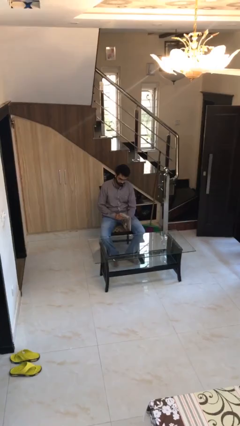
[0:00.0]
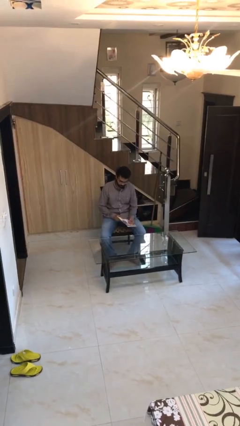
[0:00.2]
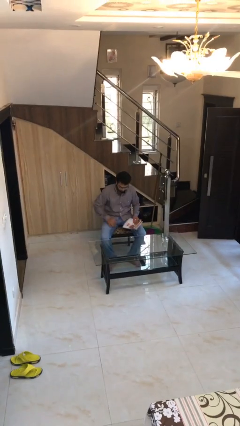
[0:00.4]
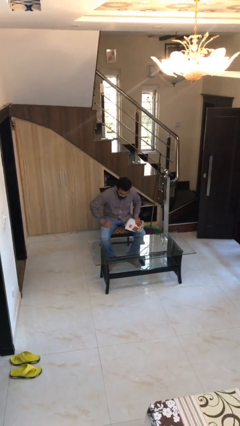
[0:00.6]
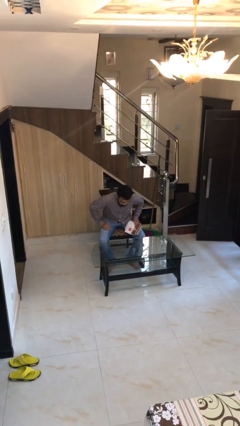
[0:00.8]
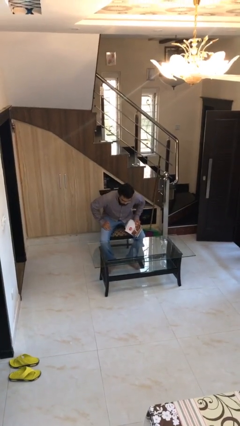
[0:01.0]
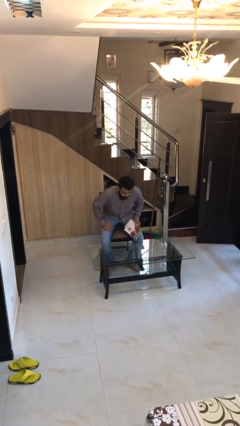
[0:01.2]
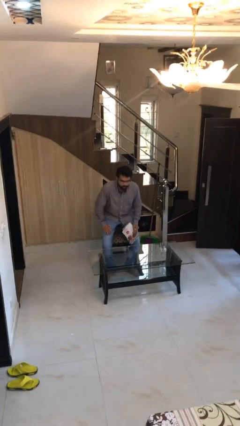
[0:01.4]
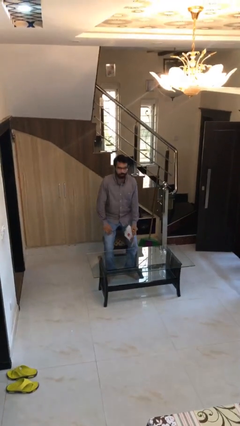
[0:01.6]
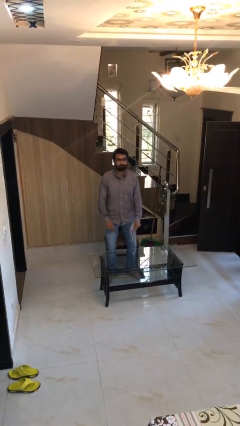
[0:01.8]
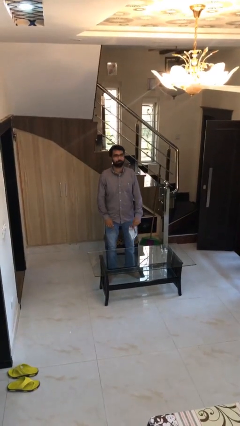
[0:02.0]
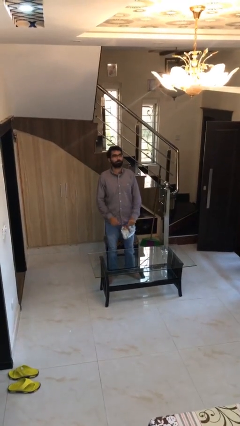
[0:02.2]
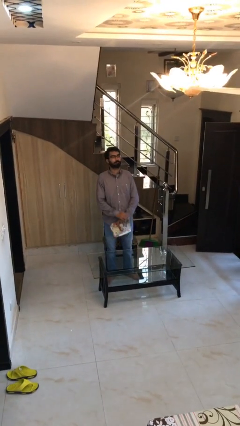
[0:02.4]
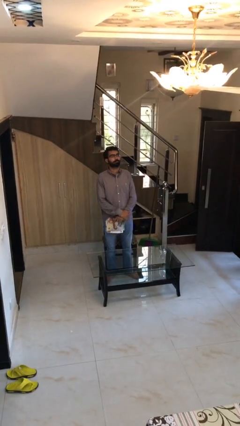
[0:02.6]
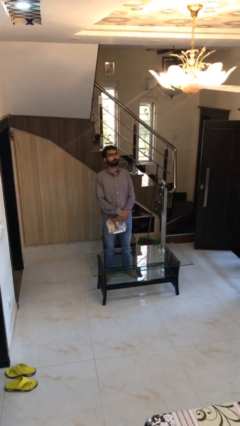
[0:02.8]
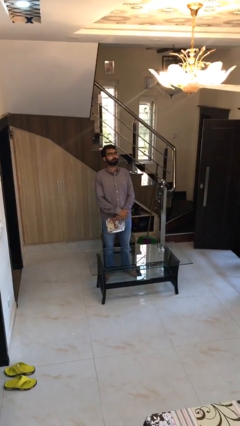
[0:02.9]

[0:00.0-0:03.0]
person stands up

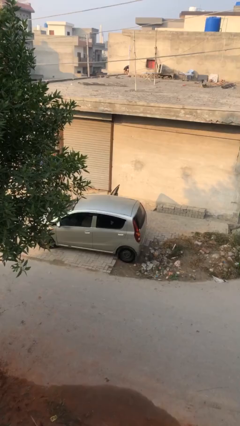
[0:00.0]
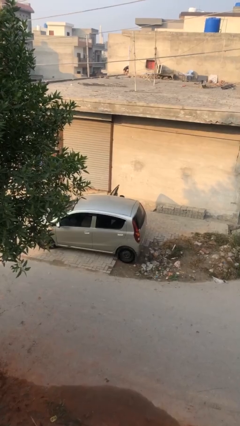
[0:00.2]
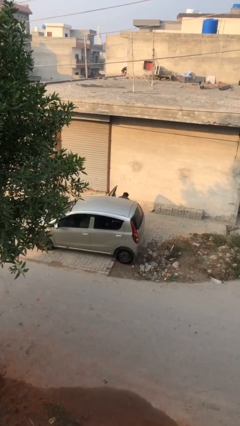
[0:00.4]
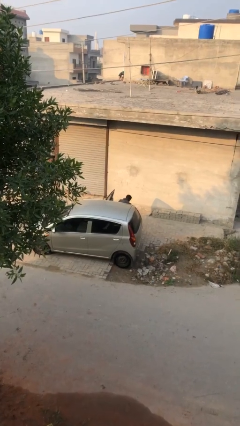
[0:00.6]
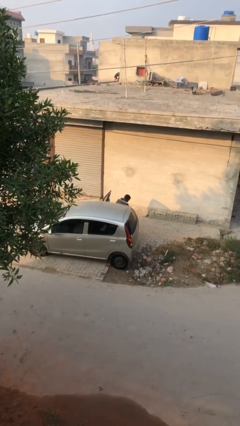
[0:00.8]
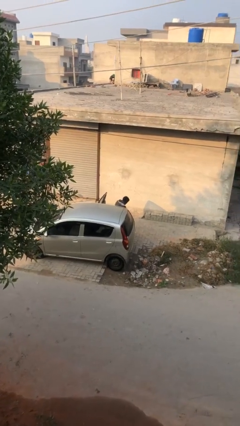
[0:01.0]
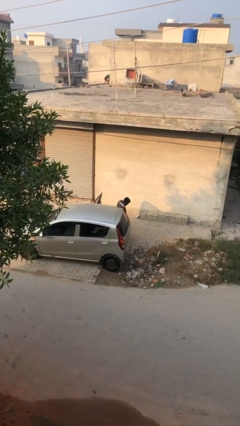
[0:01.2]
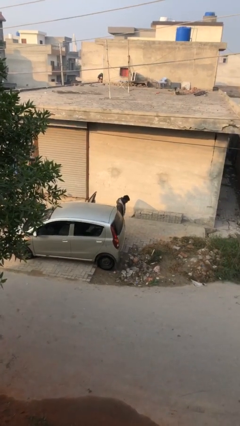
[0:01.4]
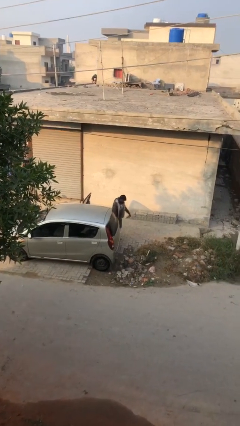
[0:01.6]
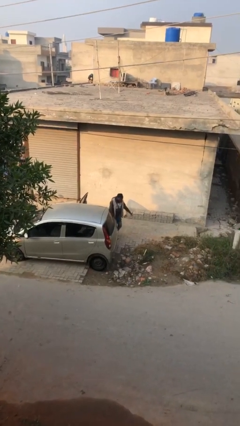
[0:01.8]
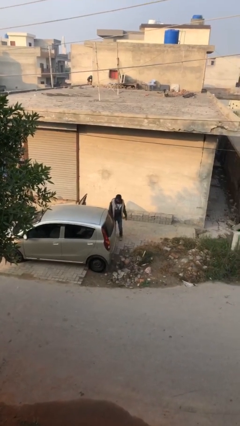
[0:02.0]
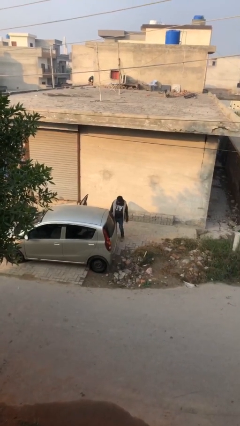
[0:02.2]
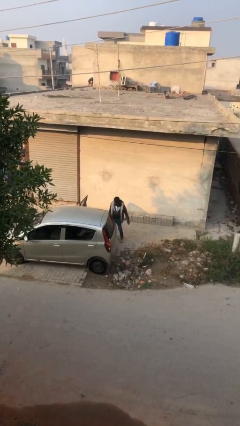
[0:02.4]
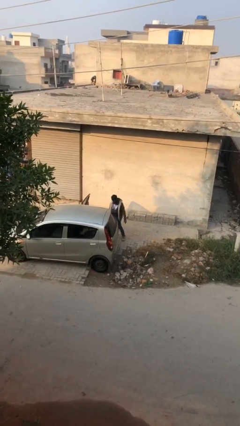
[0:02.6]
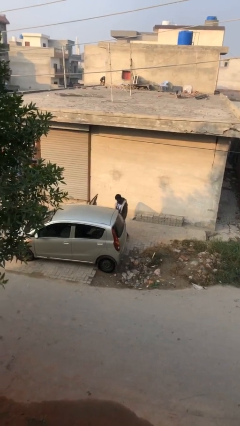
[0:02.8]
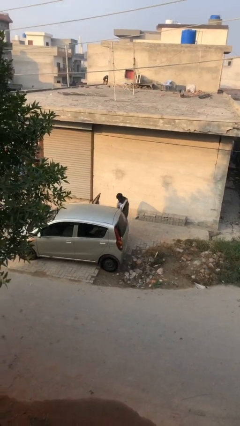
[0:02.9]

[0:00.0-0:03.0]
person exits car

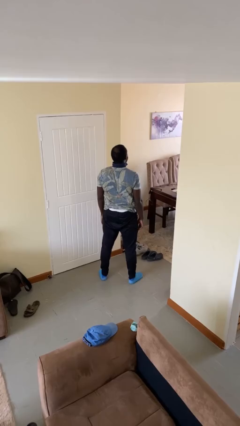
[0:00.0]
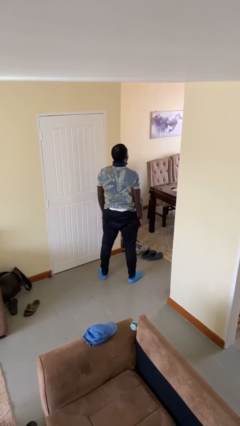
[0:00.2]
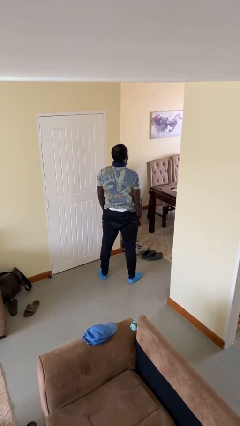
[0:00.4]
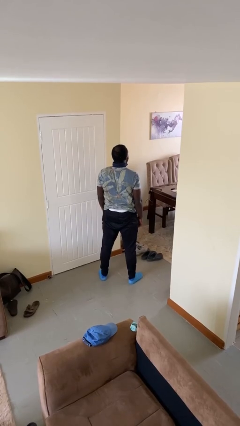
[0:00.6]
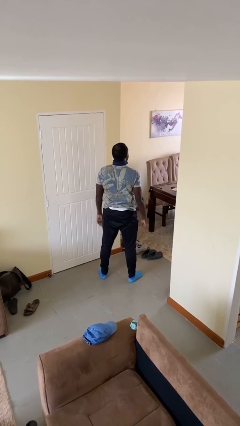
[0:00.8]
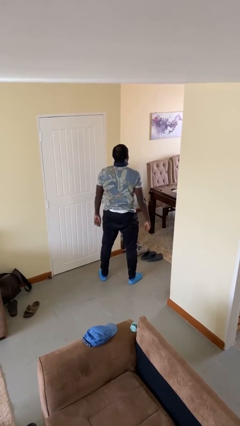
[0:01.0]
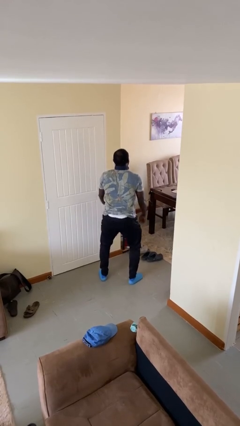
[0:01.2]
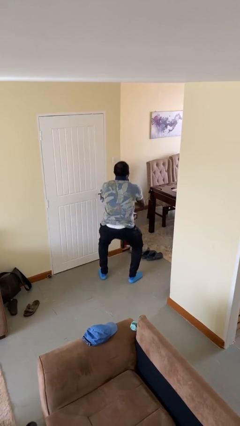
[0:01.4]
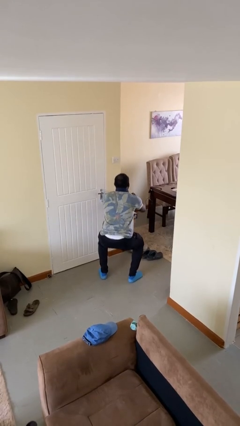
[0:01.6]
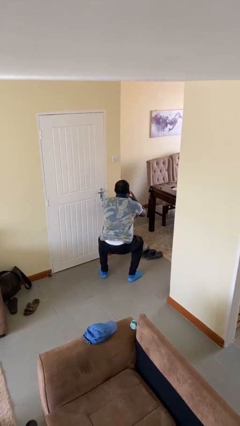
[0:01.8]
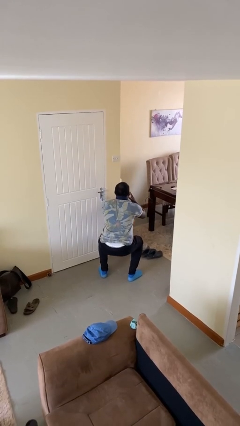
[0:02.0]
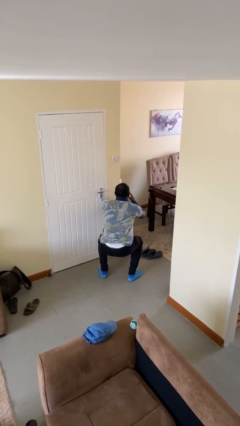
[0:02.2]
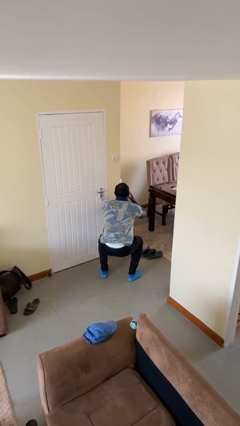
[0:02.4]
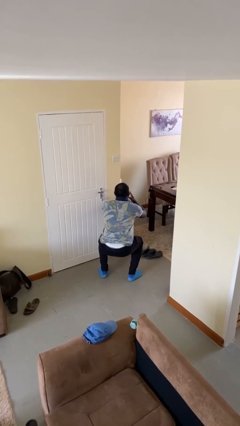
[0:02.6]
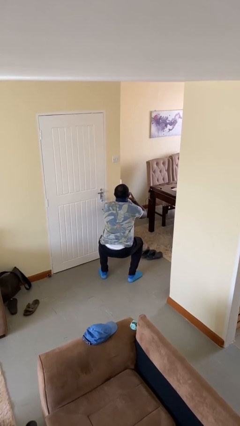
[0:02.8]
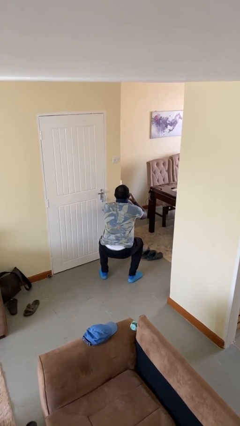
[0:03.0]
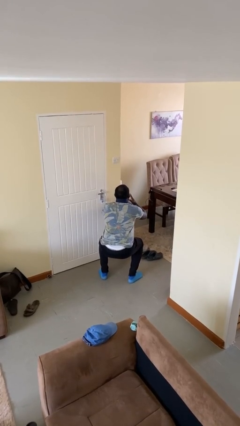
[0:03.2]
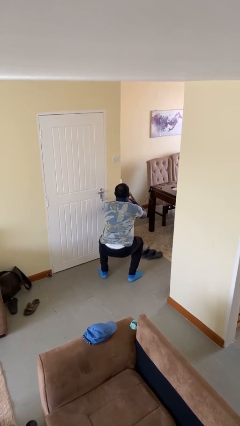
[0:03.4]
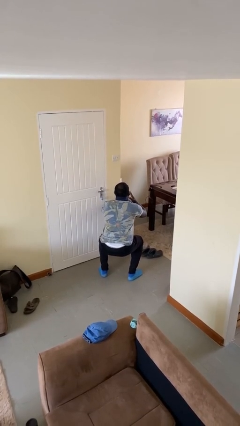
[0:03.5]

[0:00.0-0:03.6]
person squats

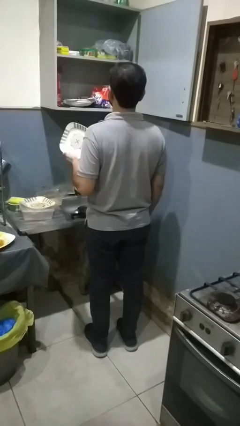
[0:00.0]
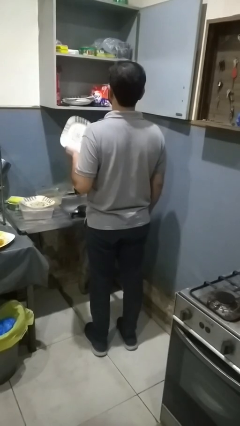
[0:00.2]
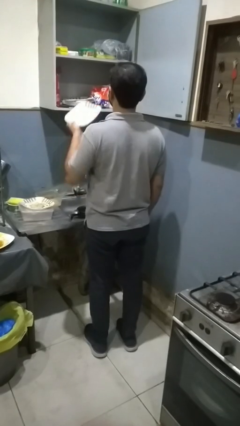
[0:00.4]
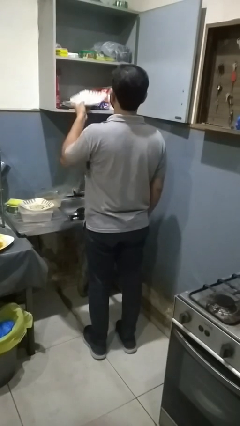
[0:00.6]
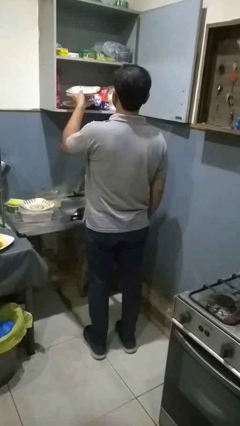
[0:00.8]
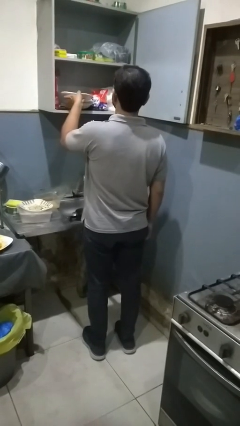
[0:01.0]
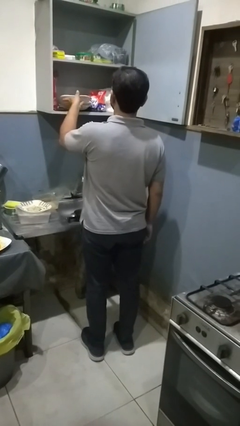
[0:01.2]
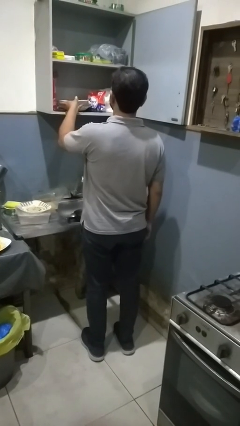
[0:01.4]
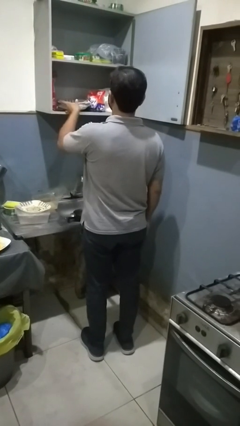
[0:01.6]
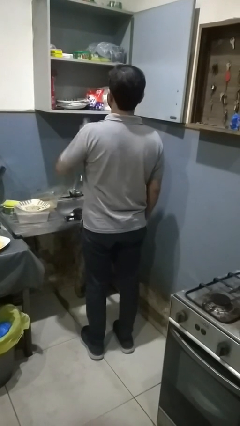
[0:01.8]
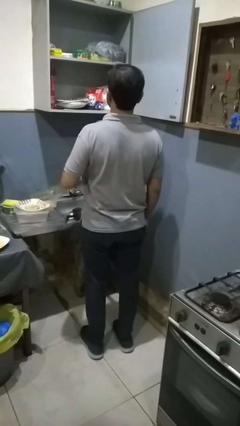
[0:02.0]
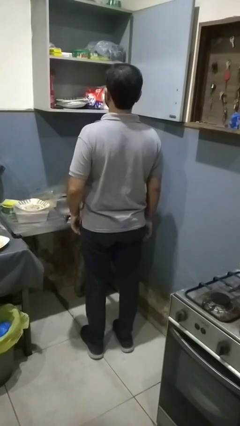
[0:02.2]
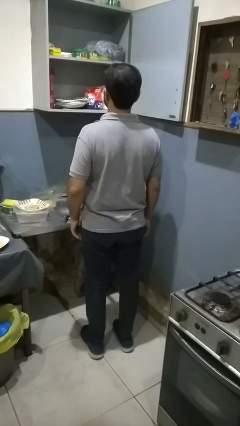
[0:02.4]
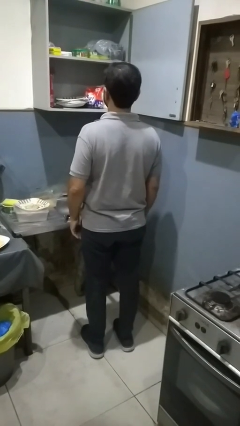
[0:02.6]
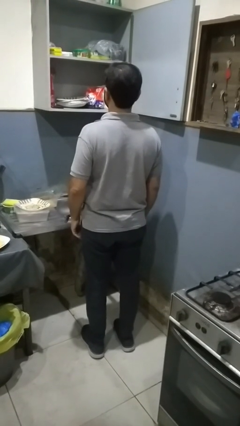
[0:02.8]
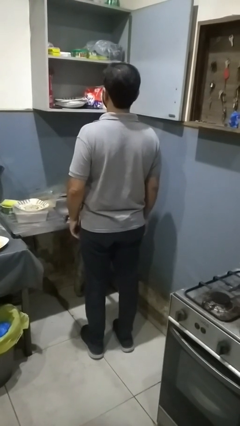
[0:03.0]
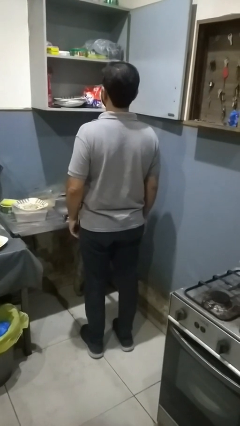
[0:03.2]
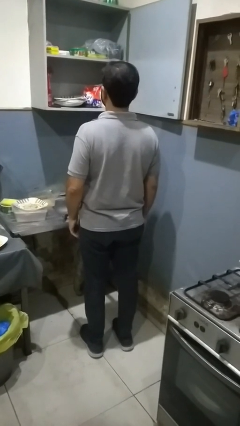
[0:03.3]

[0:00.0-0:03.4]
person puts object in cabinet

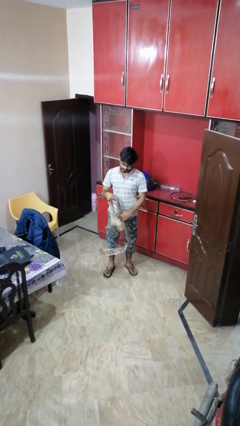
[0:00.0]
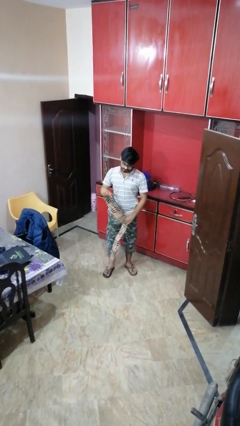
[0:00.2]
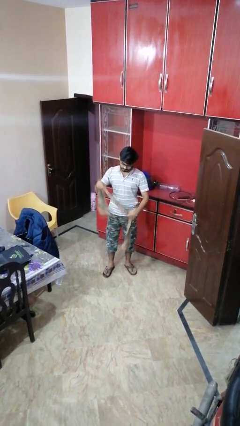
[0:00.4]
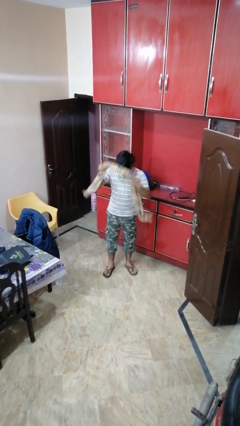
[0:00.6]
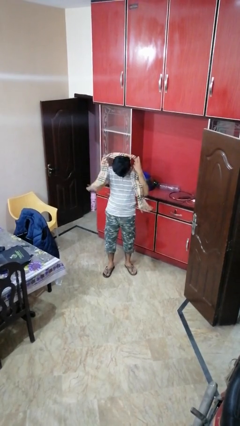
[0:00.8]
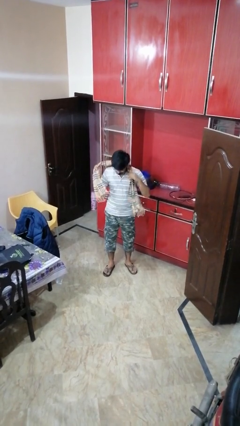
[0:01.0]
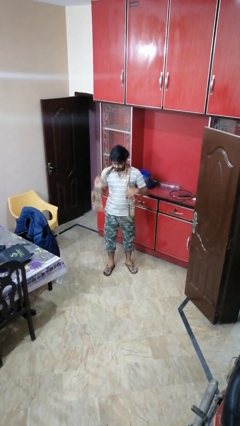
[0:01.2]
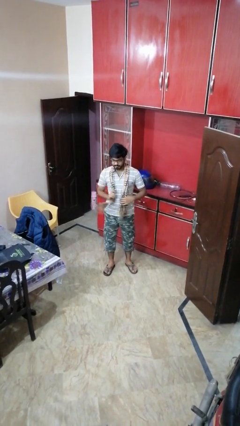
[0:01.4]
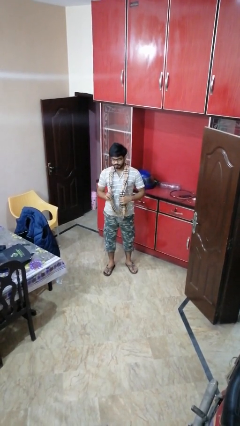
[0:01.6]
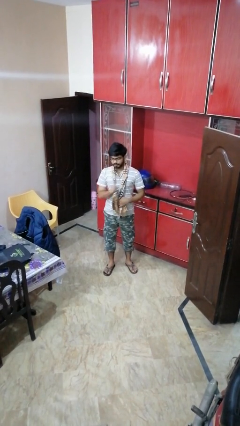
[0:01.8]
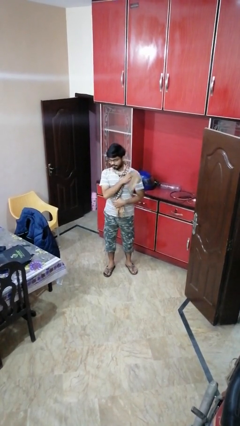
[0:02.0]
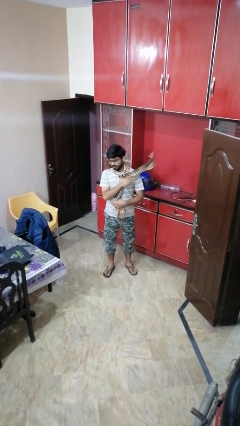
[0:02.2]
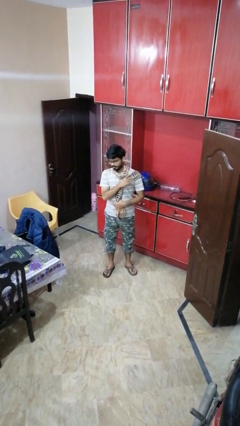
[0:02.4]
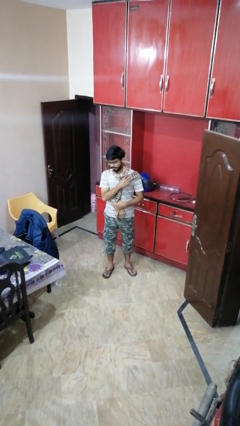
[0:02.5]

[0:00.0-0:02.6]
person puts on scarf

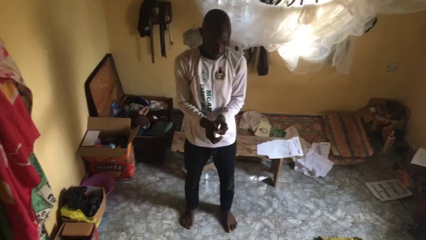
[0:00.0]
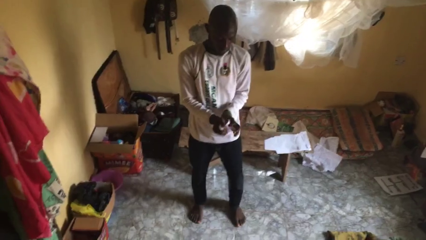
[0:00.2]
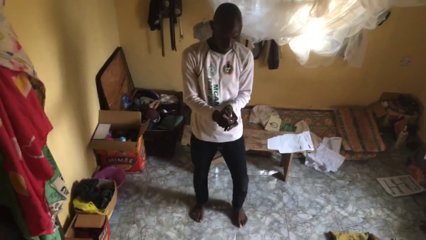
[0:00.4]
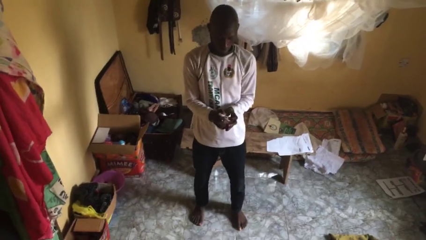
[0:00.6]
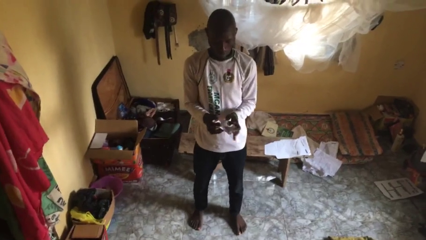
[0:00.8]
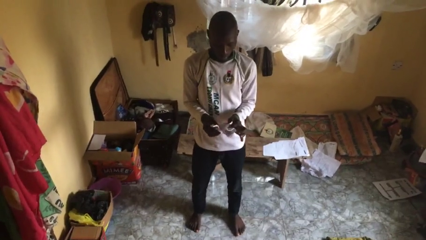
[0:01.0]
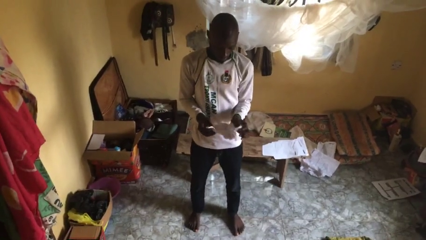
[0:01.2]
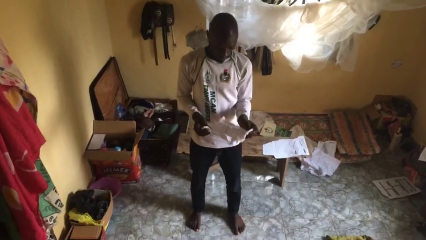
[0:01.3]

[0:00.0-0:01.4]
person crumples paper

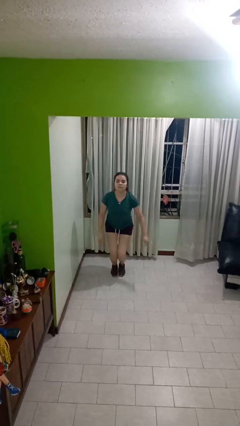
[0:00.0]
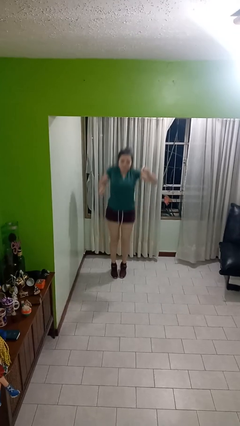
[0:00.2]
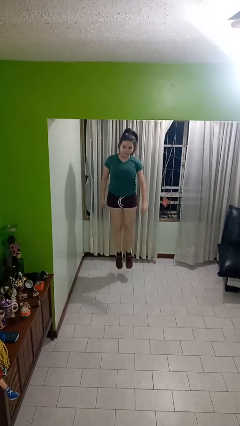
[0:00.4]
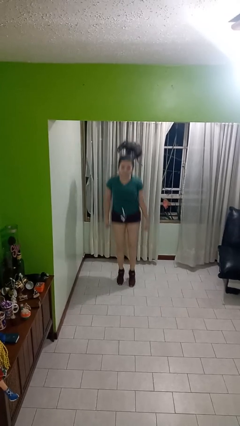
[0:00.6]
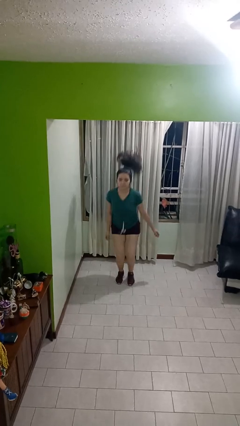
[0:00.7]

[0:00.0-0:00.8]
person jumps
